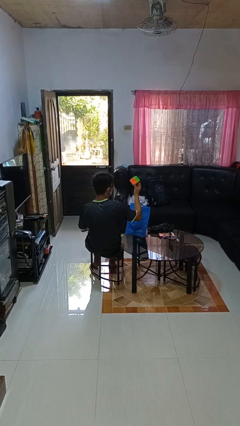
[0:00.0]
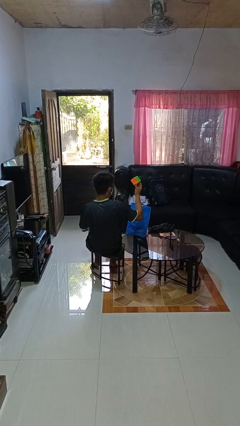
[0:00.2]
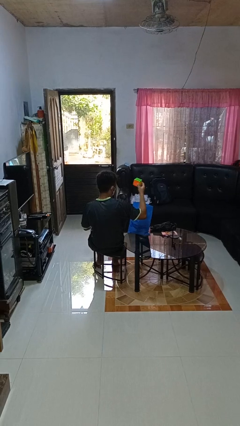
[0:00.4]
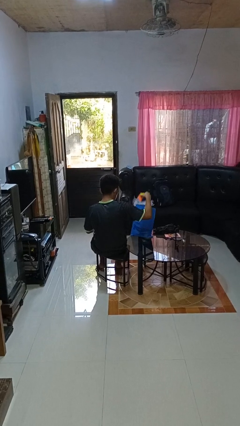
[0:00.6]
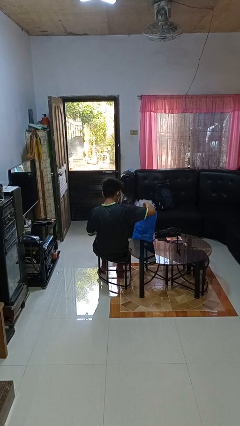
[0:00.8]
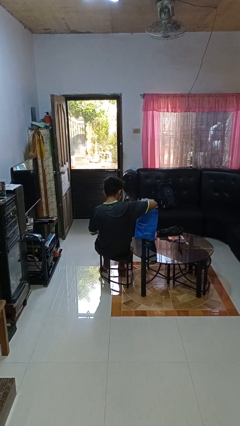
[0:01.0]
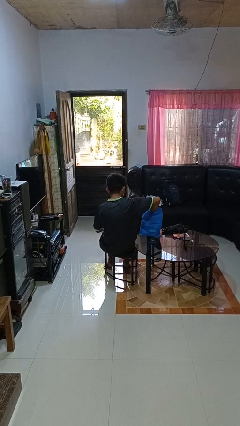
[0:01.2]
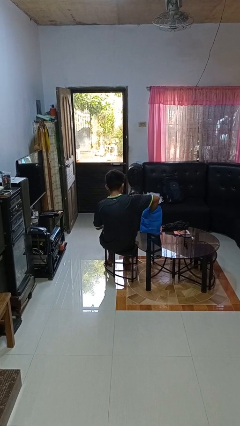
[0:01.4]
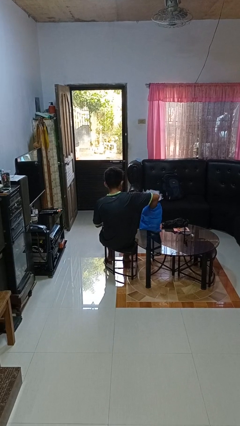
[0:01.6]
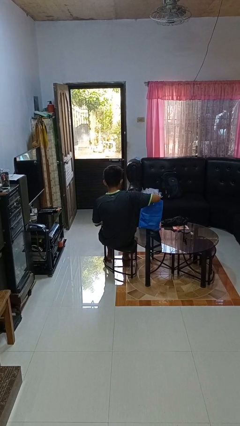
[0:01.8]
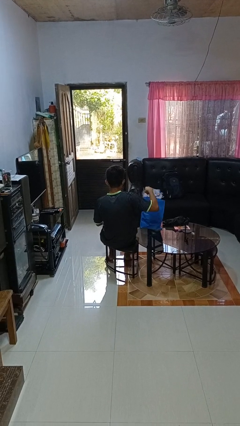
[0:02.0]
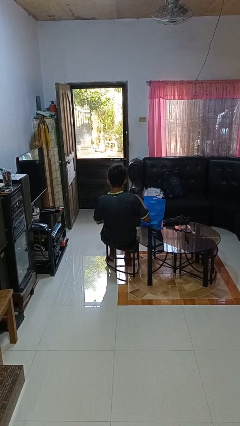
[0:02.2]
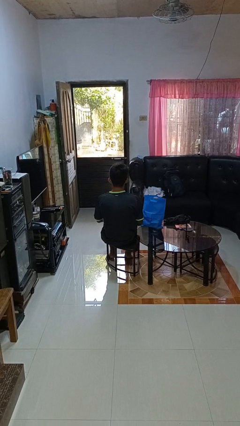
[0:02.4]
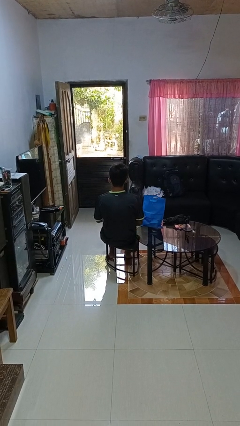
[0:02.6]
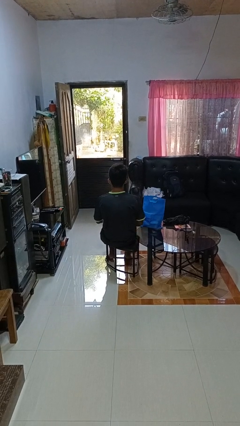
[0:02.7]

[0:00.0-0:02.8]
person puts object into bag

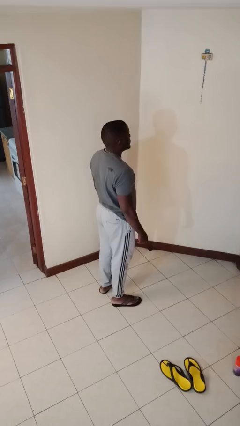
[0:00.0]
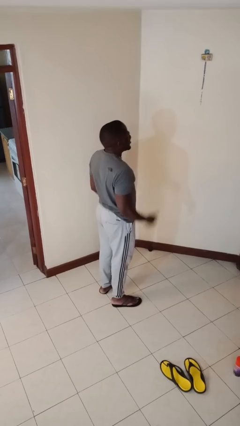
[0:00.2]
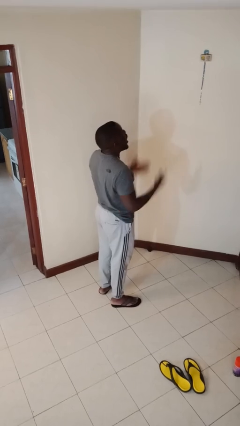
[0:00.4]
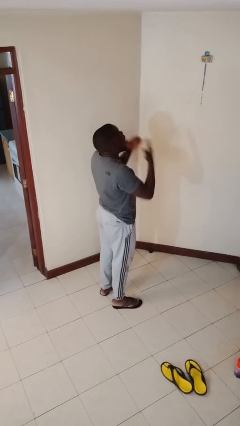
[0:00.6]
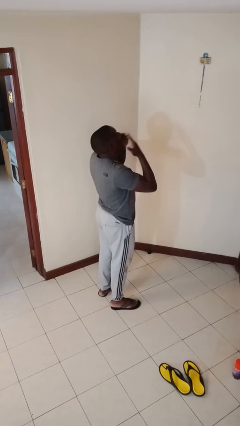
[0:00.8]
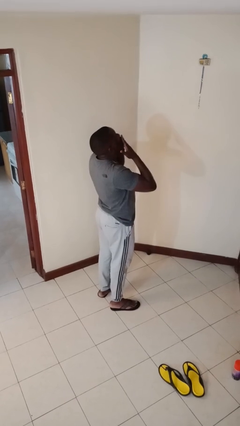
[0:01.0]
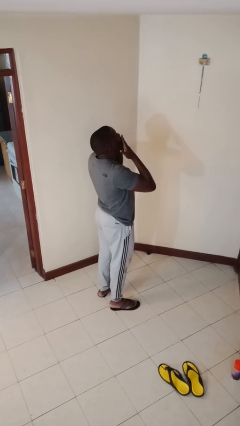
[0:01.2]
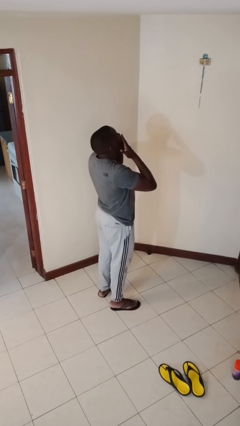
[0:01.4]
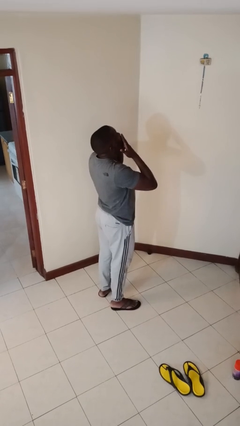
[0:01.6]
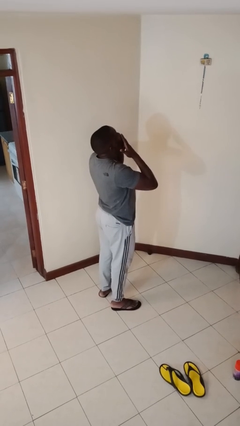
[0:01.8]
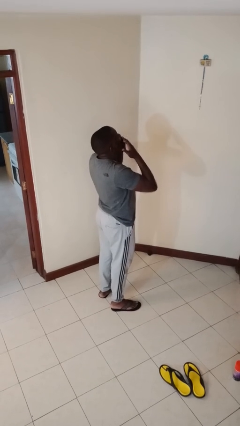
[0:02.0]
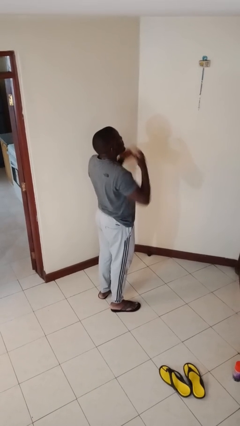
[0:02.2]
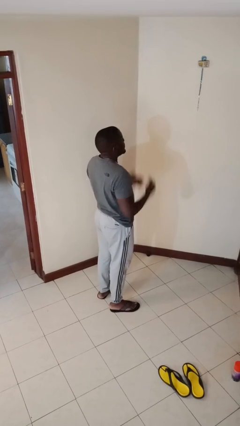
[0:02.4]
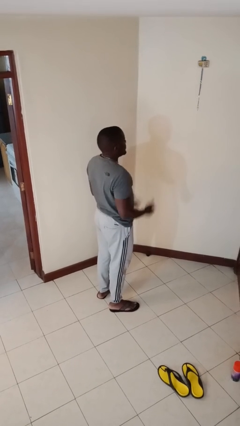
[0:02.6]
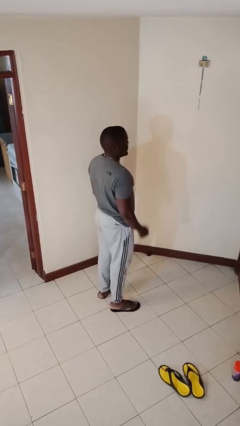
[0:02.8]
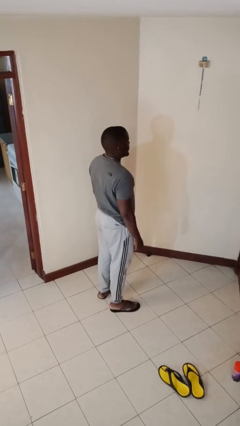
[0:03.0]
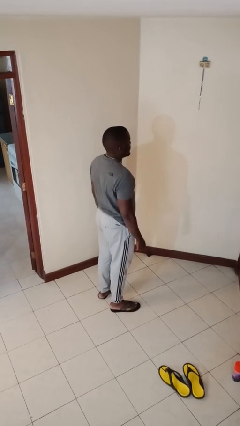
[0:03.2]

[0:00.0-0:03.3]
person yawns

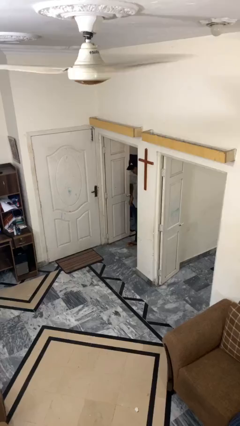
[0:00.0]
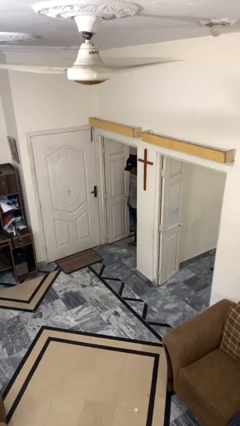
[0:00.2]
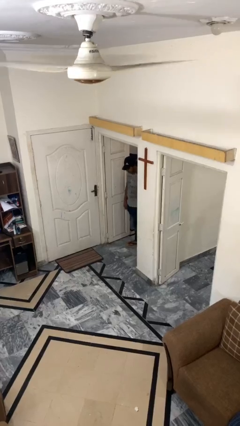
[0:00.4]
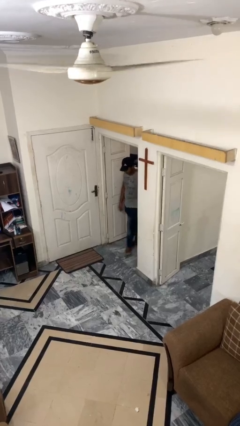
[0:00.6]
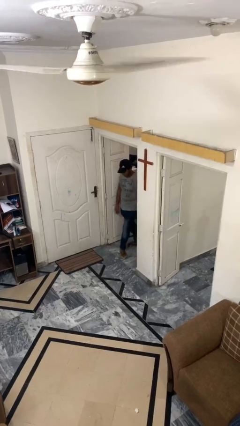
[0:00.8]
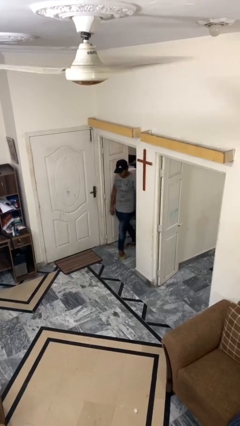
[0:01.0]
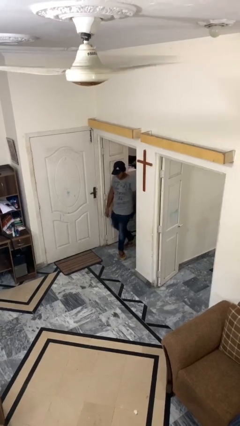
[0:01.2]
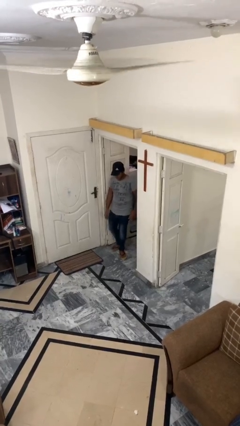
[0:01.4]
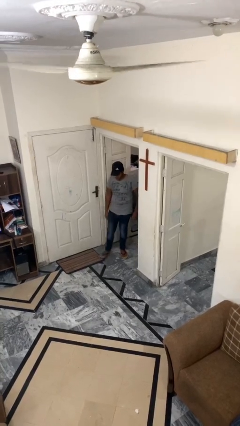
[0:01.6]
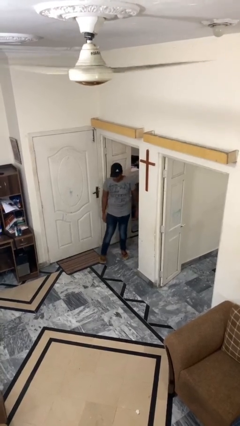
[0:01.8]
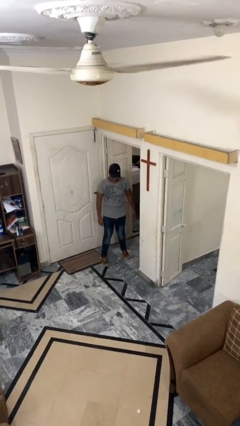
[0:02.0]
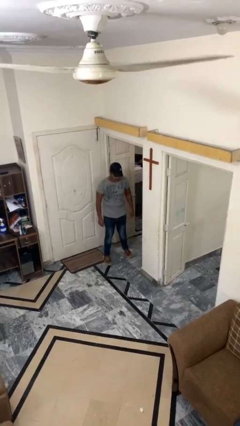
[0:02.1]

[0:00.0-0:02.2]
person enters scene through structure

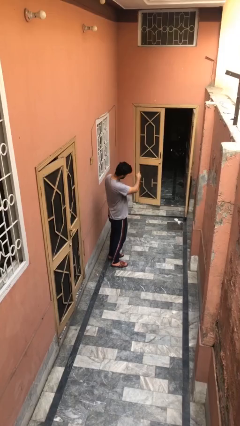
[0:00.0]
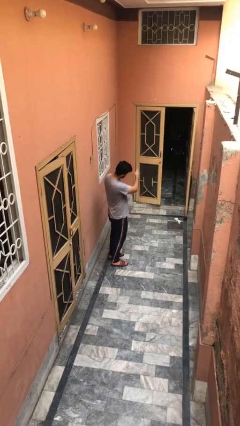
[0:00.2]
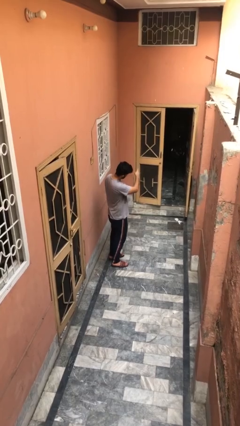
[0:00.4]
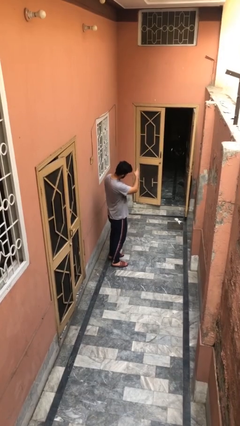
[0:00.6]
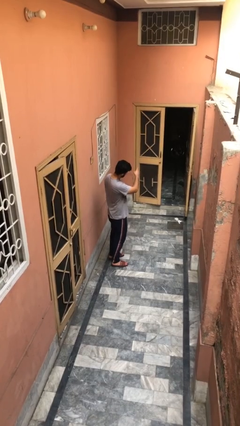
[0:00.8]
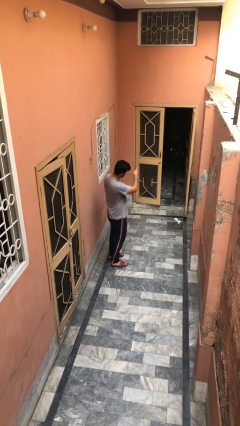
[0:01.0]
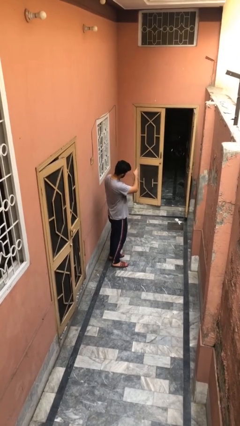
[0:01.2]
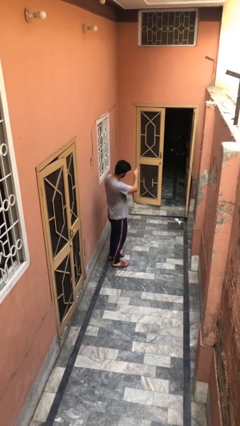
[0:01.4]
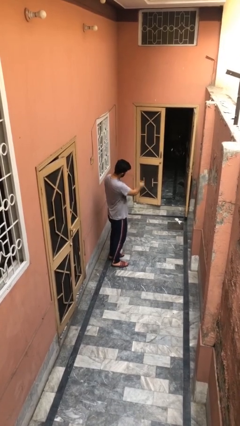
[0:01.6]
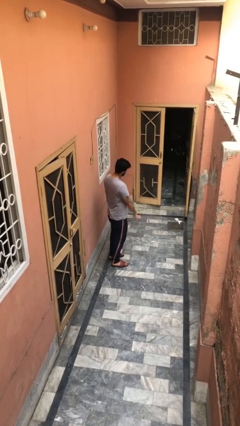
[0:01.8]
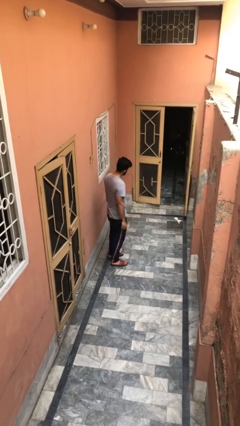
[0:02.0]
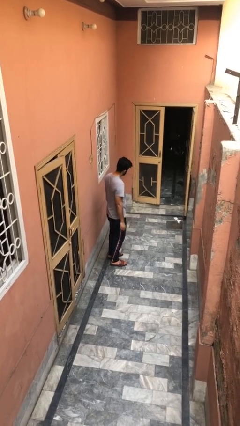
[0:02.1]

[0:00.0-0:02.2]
person points at person

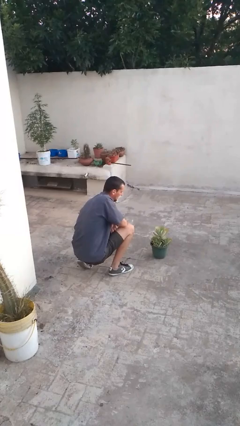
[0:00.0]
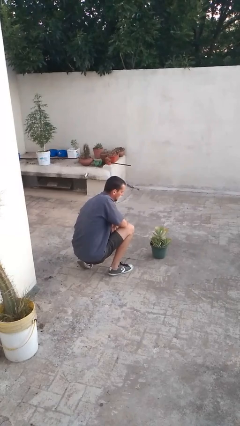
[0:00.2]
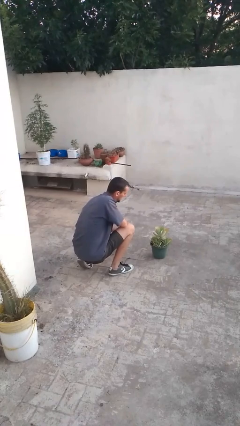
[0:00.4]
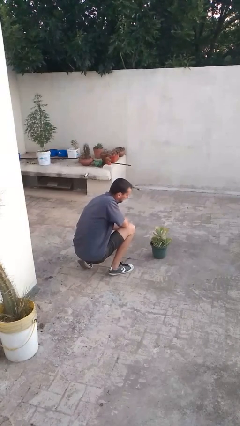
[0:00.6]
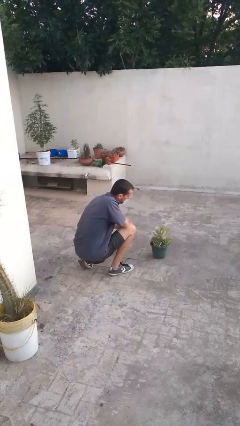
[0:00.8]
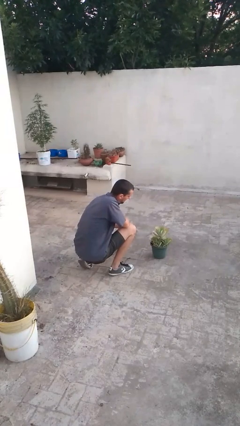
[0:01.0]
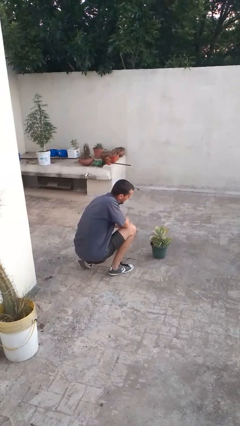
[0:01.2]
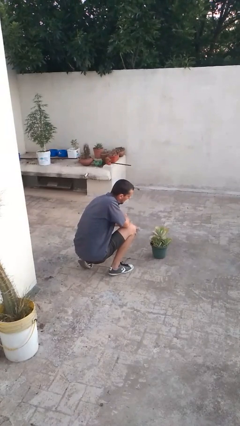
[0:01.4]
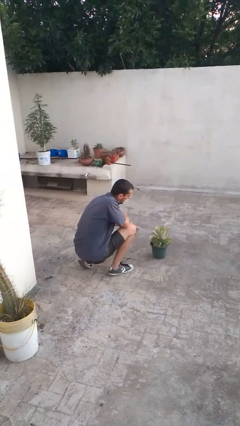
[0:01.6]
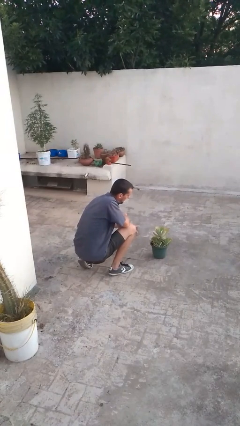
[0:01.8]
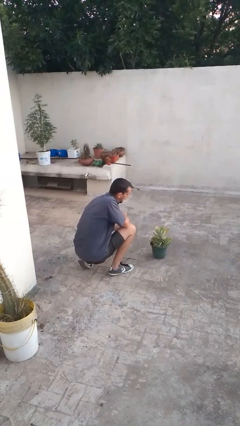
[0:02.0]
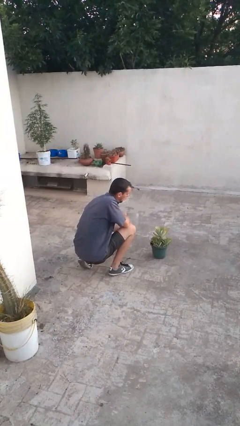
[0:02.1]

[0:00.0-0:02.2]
person waters houseplant

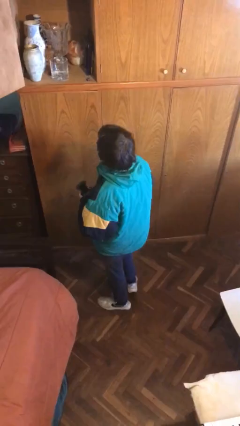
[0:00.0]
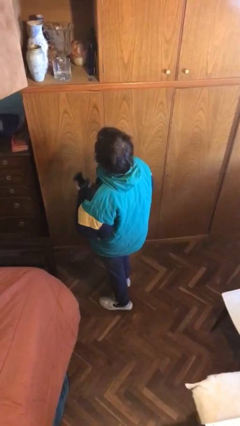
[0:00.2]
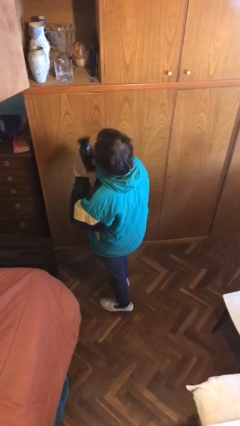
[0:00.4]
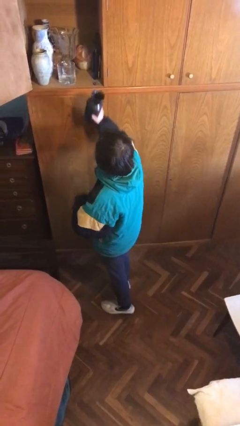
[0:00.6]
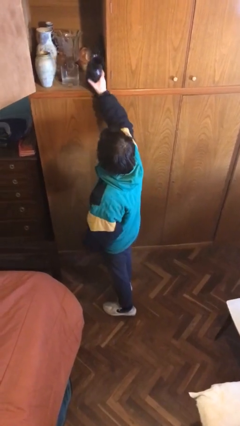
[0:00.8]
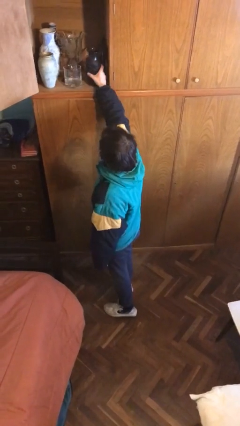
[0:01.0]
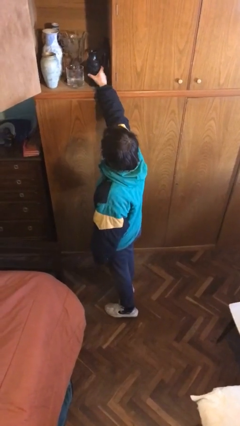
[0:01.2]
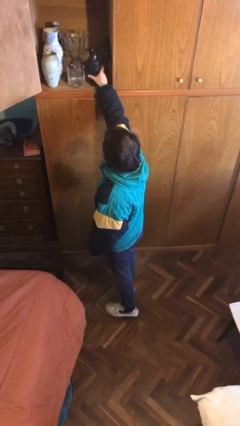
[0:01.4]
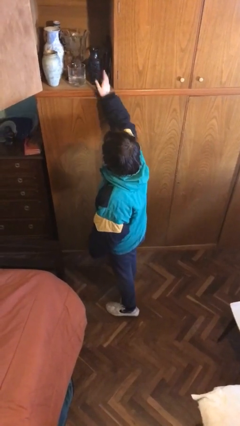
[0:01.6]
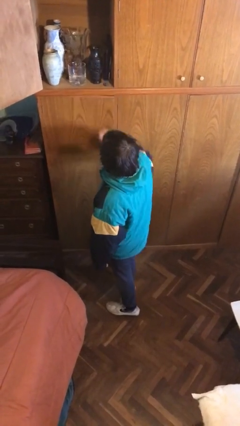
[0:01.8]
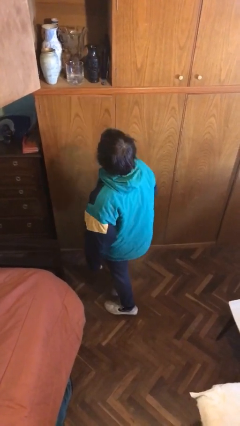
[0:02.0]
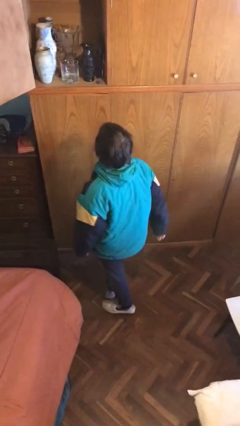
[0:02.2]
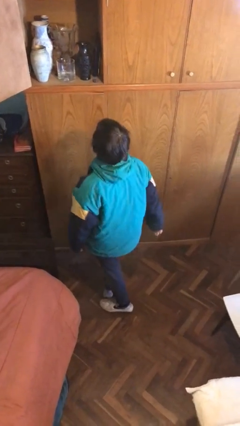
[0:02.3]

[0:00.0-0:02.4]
person puts down object into cabinet

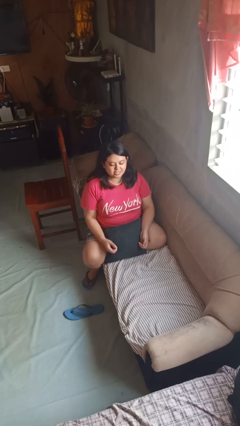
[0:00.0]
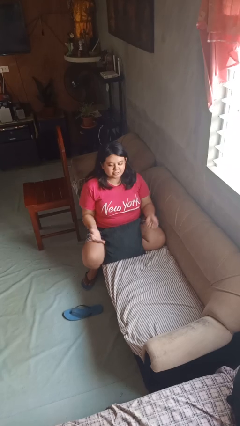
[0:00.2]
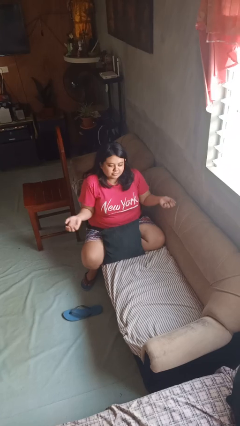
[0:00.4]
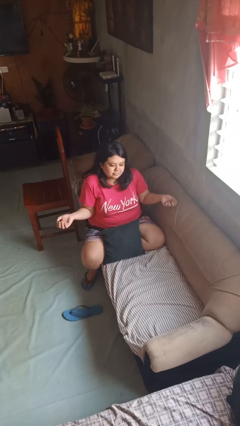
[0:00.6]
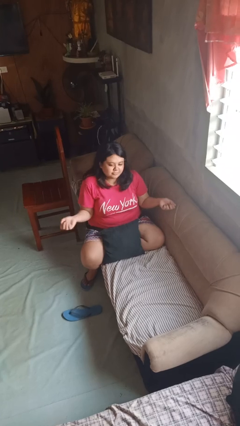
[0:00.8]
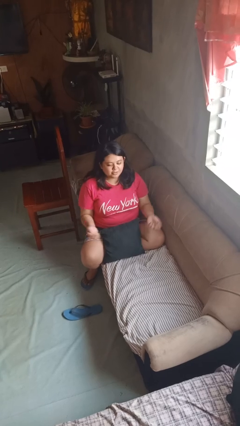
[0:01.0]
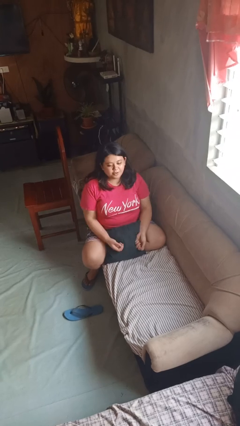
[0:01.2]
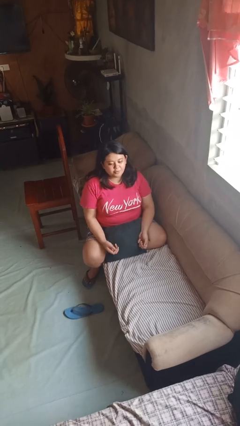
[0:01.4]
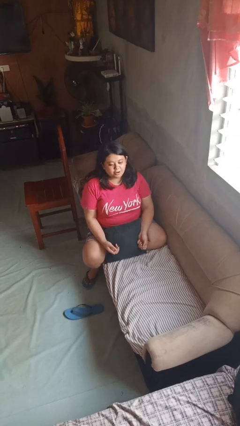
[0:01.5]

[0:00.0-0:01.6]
person shrugs

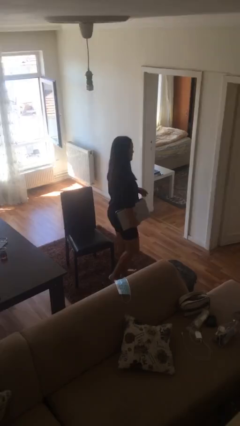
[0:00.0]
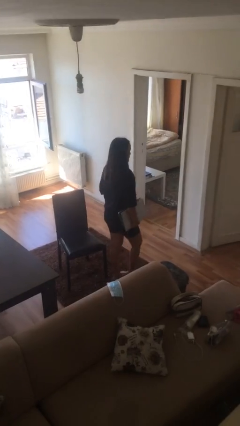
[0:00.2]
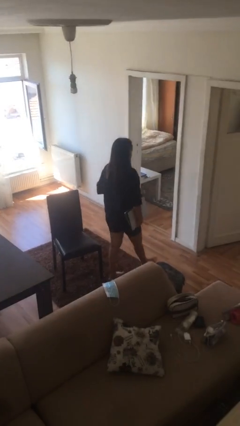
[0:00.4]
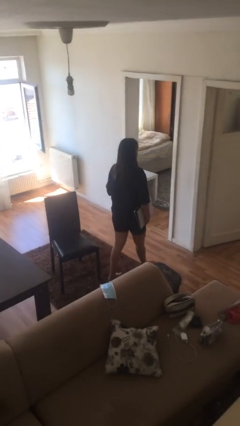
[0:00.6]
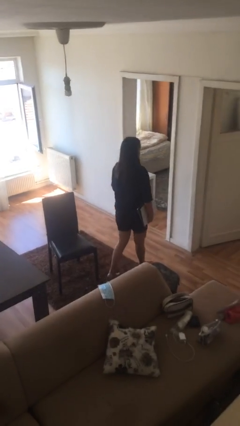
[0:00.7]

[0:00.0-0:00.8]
person sits down
